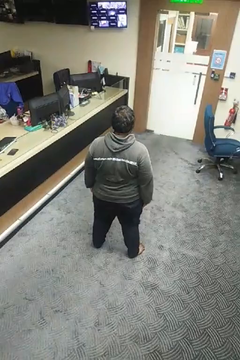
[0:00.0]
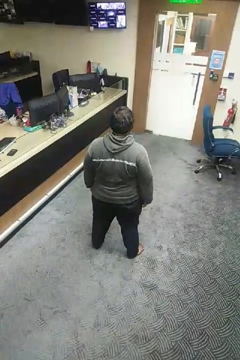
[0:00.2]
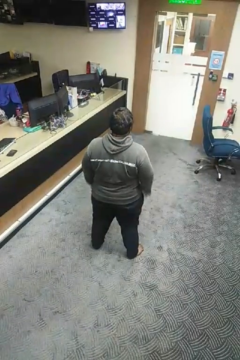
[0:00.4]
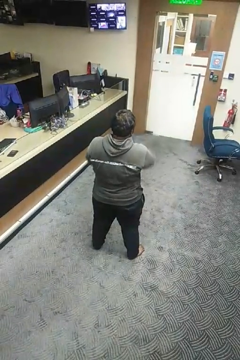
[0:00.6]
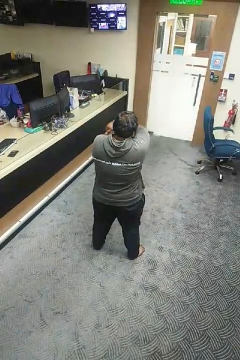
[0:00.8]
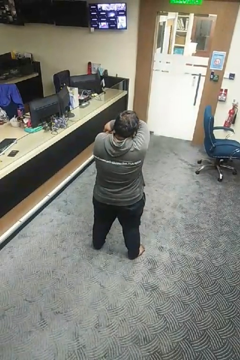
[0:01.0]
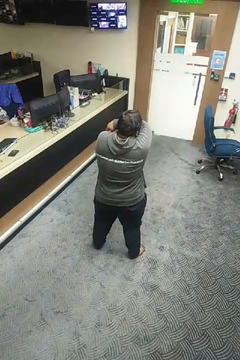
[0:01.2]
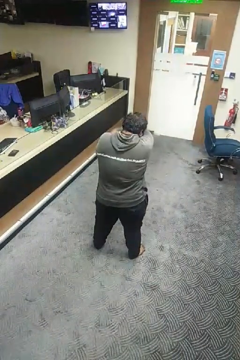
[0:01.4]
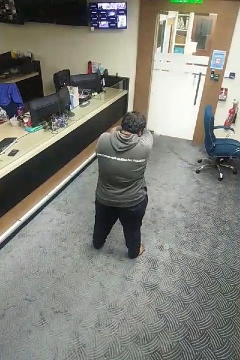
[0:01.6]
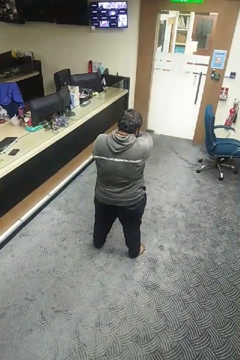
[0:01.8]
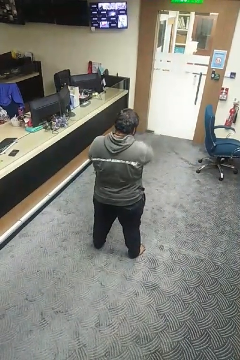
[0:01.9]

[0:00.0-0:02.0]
person sneezes into arm

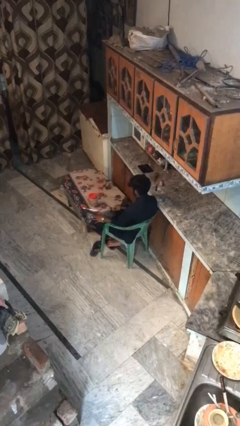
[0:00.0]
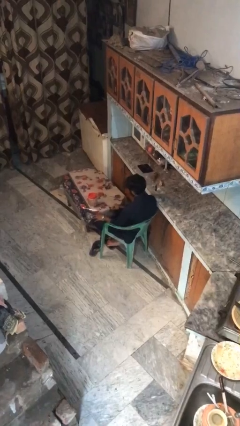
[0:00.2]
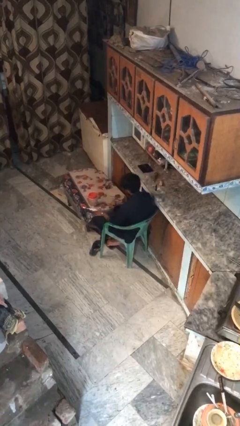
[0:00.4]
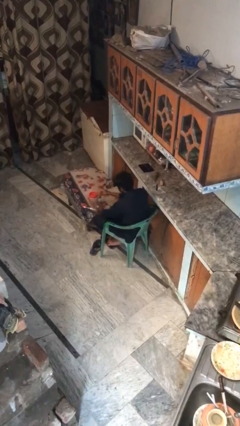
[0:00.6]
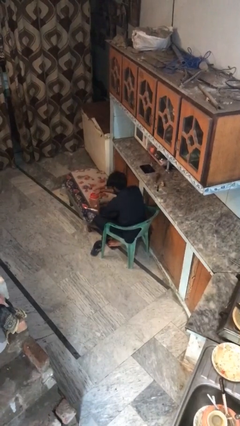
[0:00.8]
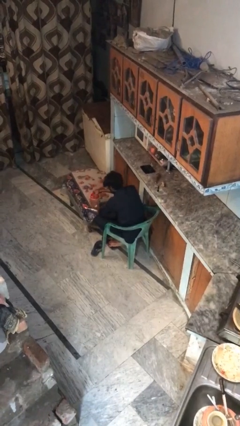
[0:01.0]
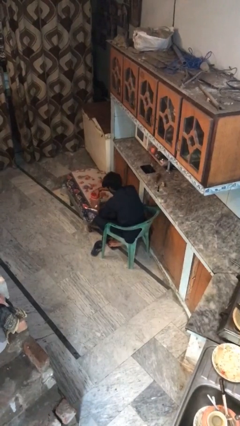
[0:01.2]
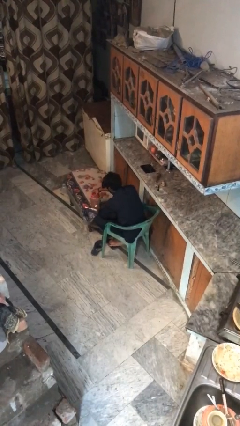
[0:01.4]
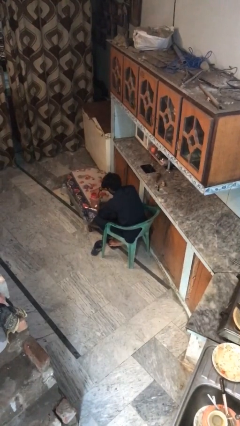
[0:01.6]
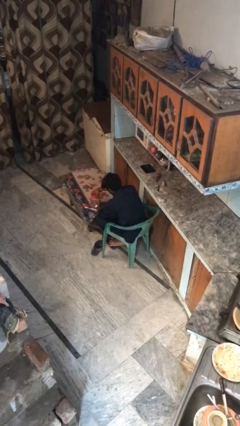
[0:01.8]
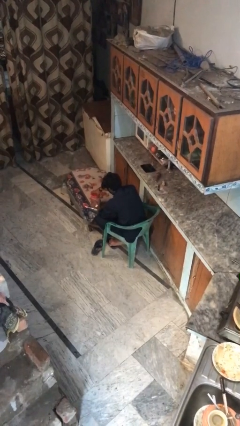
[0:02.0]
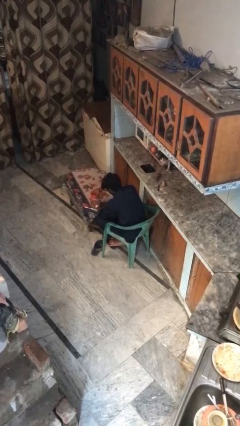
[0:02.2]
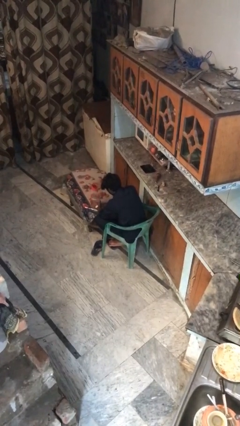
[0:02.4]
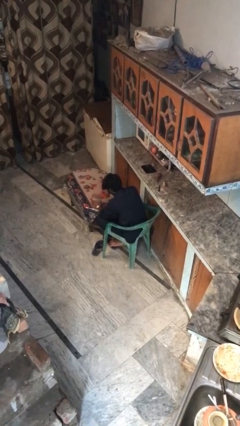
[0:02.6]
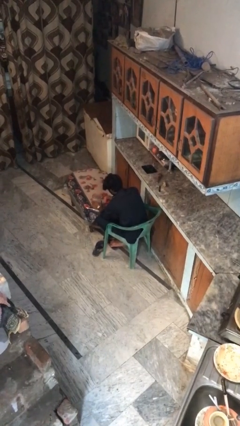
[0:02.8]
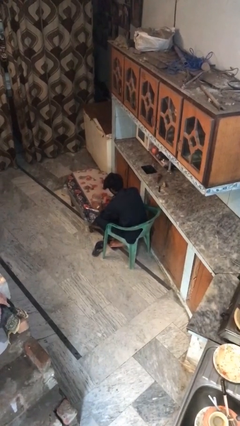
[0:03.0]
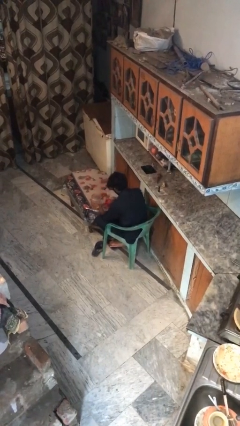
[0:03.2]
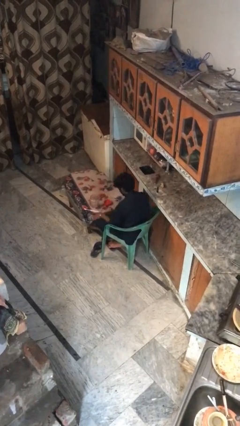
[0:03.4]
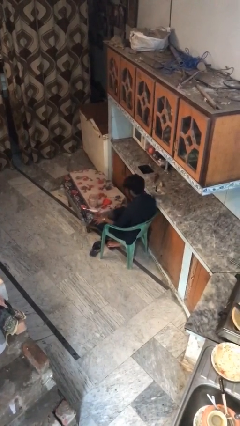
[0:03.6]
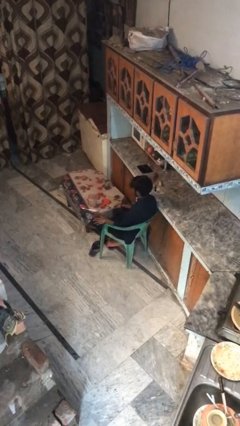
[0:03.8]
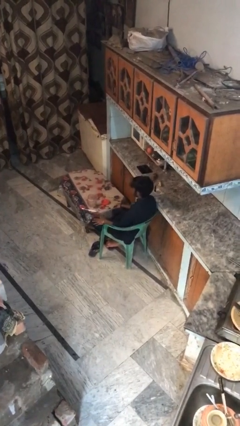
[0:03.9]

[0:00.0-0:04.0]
person opens jar

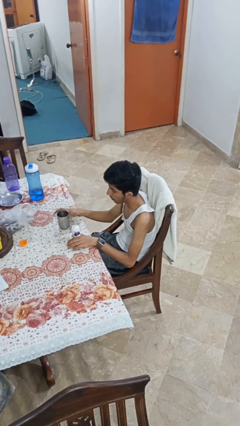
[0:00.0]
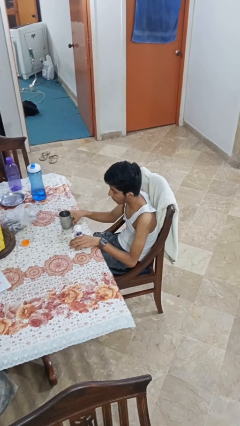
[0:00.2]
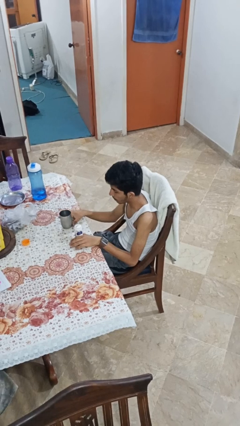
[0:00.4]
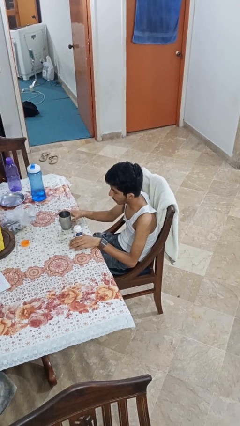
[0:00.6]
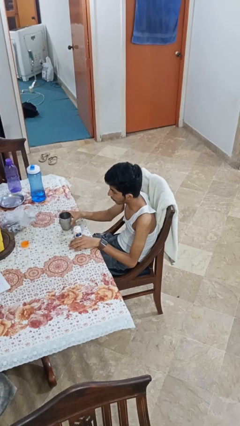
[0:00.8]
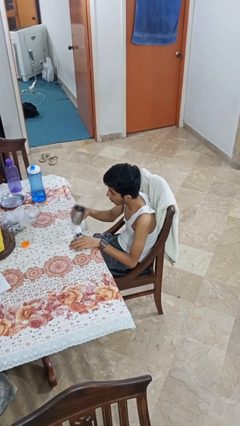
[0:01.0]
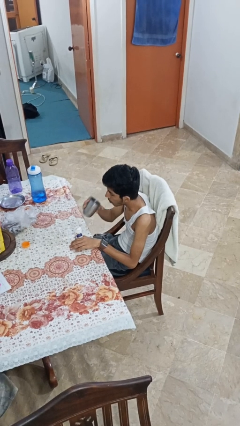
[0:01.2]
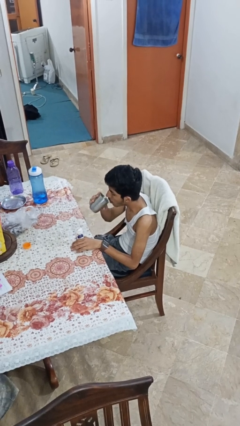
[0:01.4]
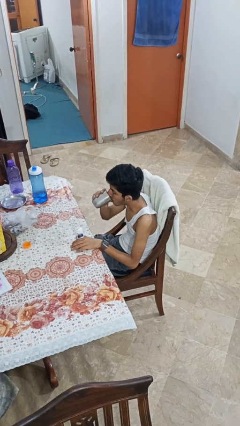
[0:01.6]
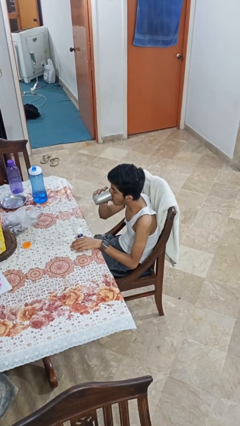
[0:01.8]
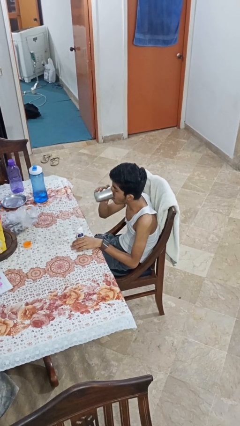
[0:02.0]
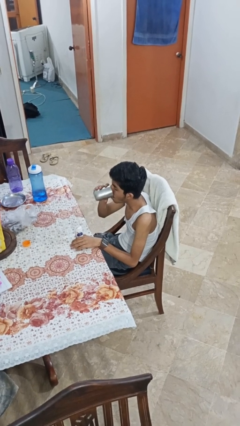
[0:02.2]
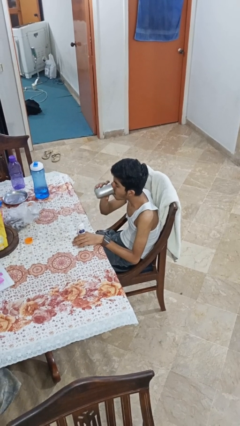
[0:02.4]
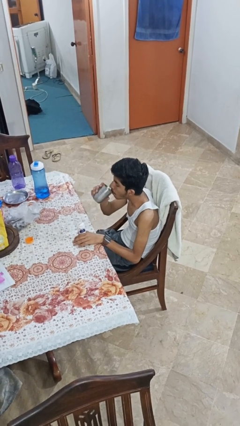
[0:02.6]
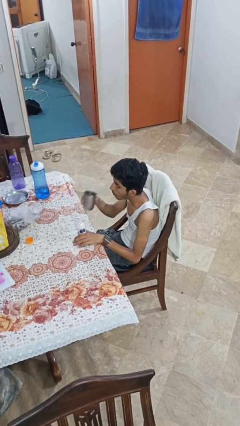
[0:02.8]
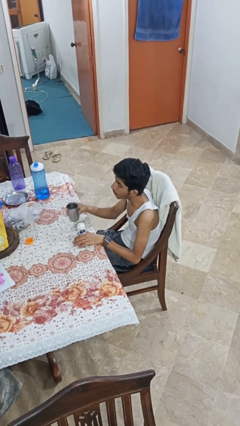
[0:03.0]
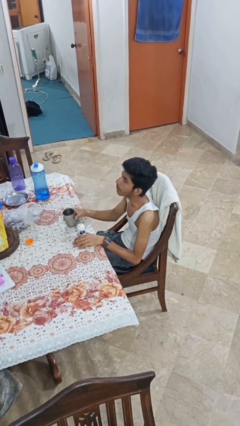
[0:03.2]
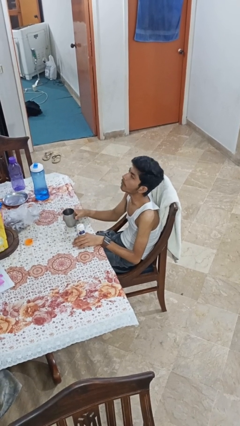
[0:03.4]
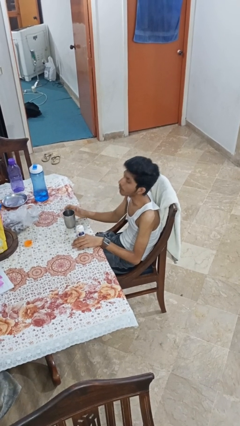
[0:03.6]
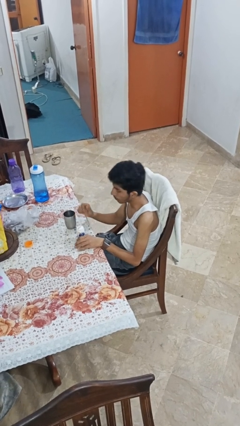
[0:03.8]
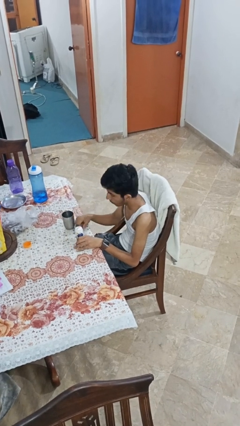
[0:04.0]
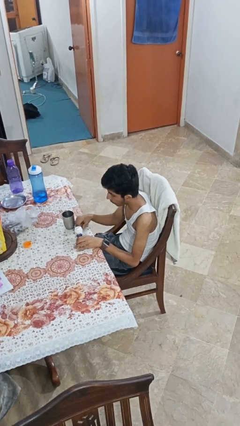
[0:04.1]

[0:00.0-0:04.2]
person drinks from cup

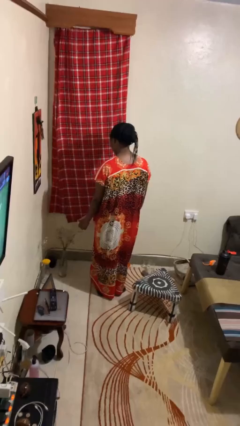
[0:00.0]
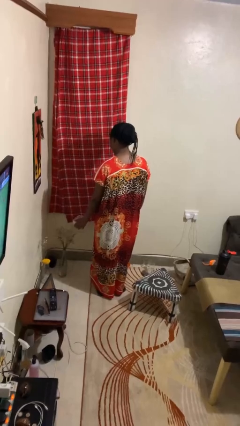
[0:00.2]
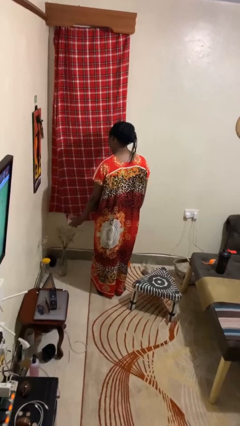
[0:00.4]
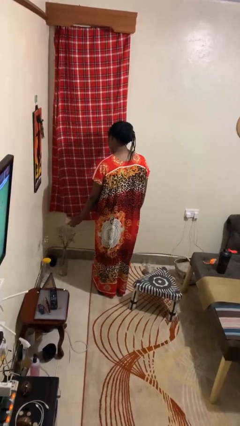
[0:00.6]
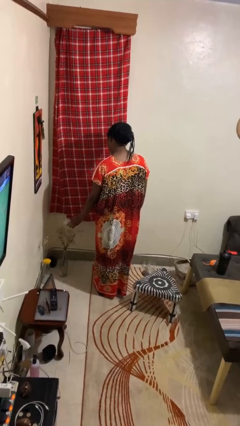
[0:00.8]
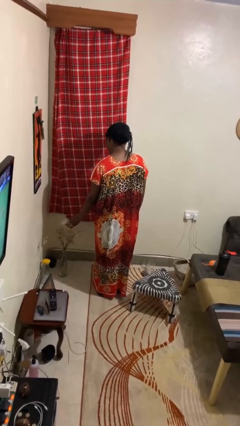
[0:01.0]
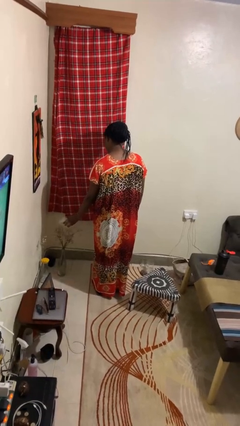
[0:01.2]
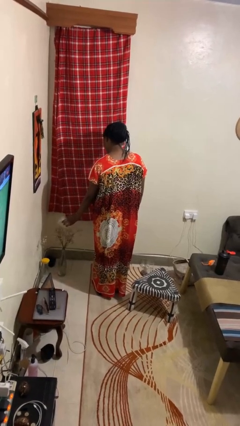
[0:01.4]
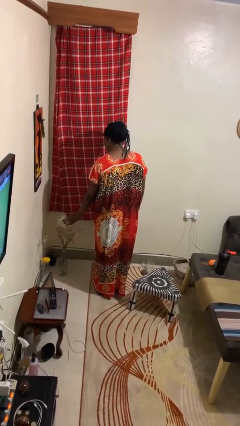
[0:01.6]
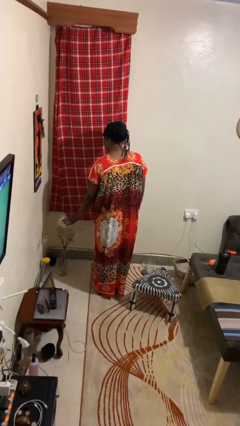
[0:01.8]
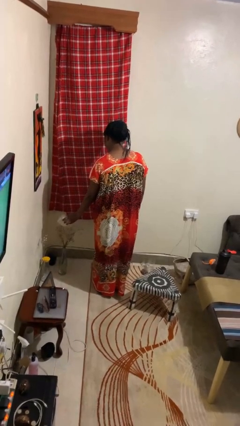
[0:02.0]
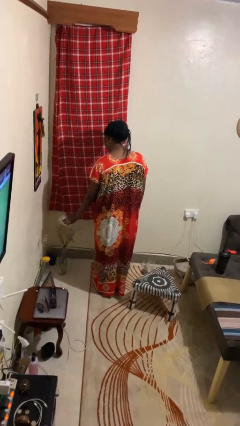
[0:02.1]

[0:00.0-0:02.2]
person waters houseplant

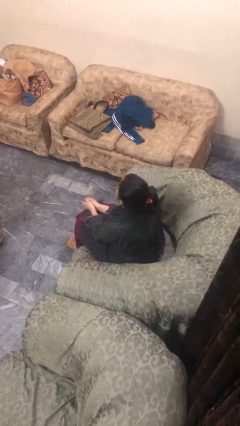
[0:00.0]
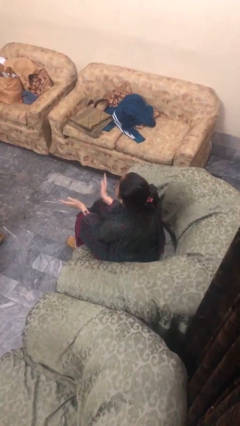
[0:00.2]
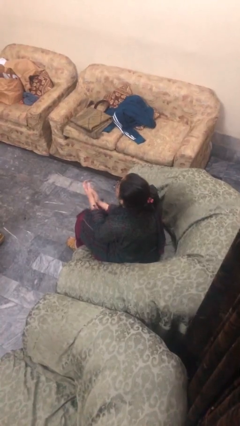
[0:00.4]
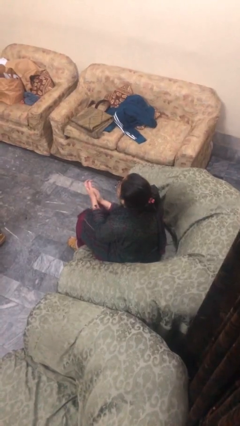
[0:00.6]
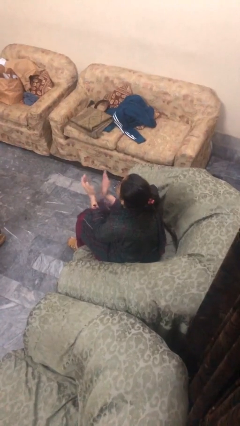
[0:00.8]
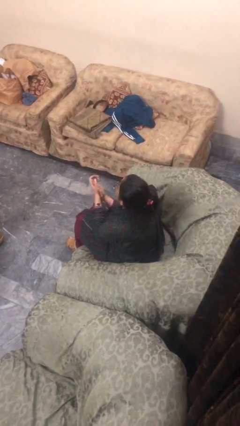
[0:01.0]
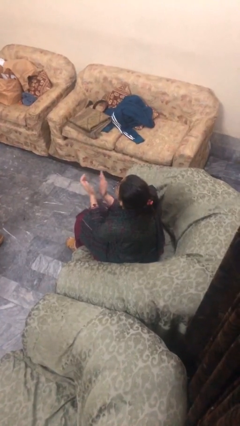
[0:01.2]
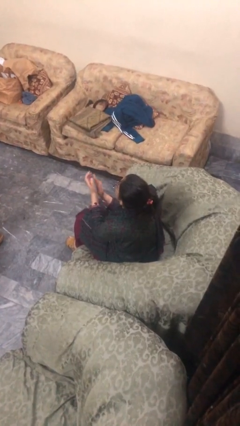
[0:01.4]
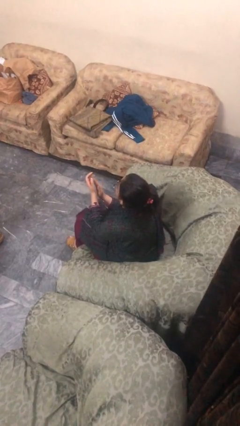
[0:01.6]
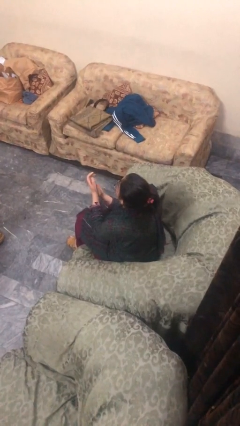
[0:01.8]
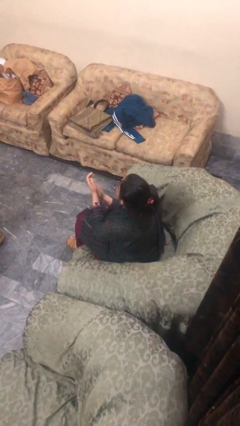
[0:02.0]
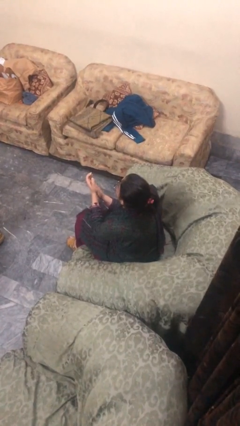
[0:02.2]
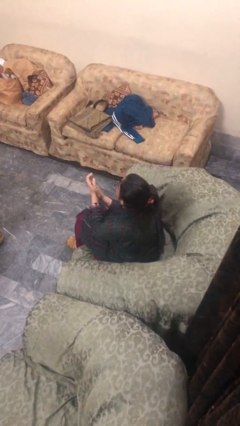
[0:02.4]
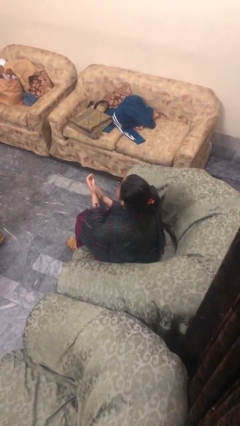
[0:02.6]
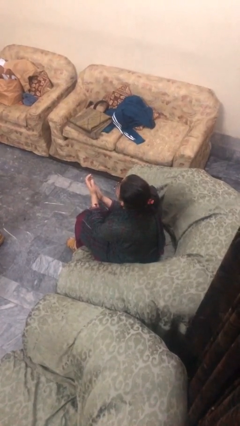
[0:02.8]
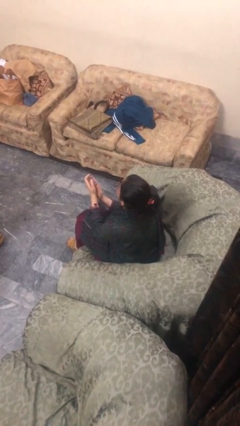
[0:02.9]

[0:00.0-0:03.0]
person claps hands

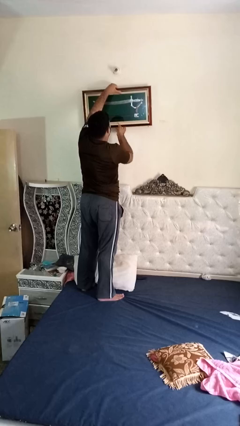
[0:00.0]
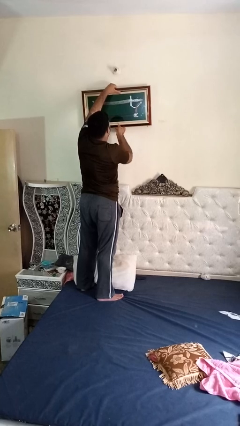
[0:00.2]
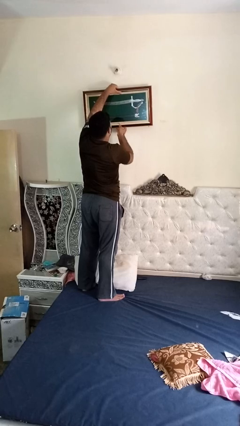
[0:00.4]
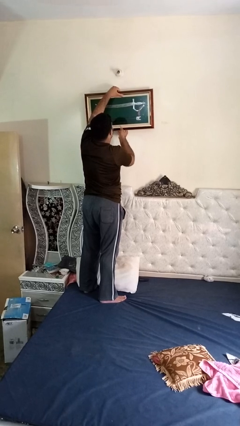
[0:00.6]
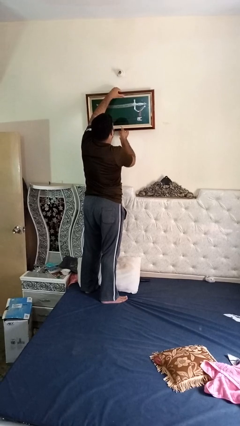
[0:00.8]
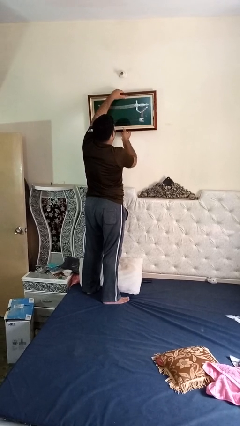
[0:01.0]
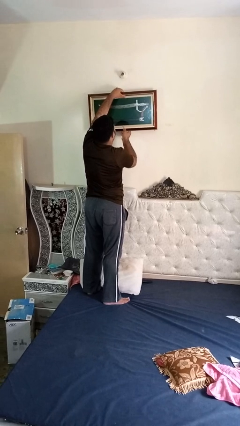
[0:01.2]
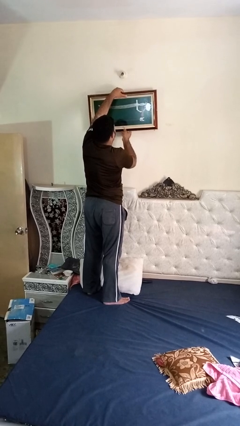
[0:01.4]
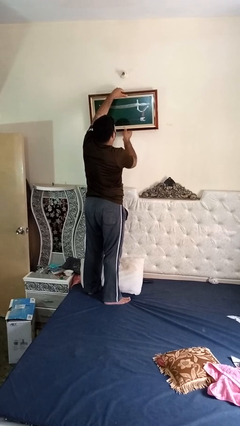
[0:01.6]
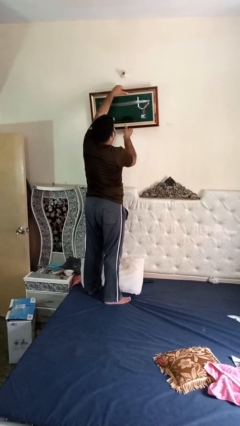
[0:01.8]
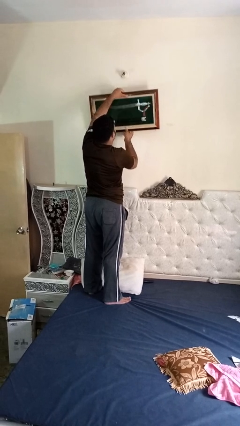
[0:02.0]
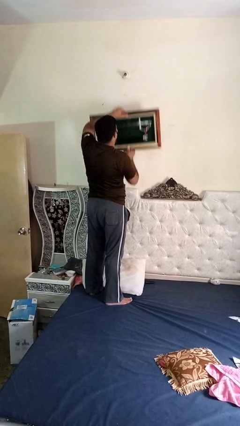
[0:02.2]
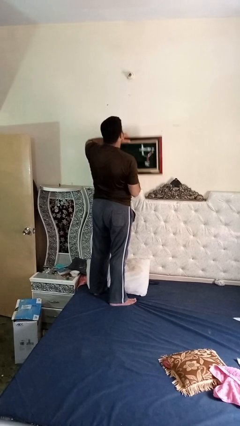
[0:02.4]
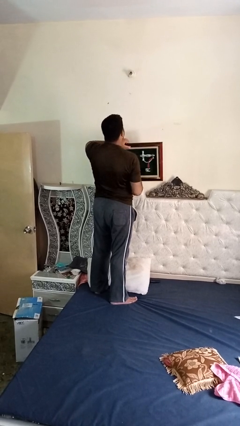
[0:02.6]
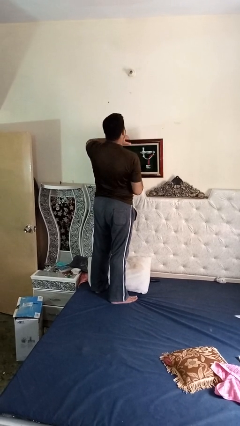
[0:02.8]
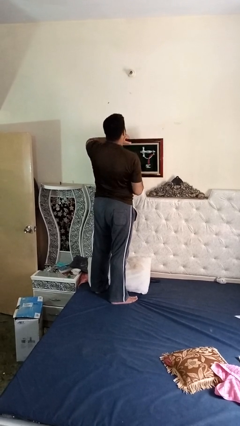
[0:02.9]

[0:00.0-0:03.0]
person takes down picture frame
